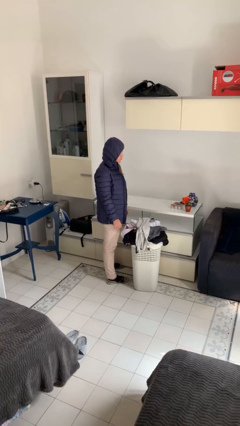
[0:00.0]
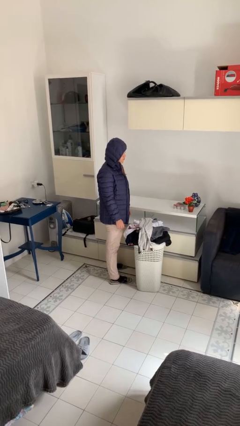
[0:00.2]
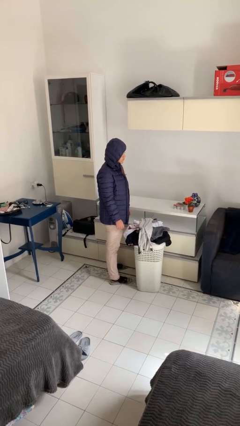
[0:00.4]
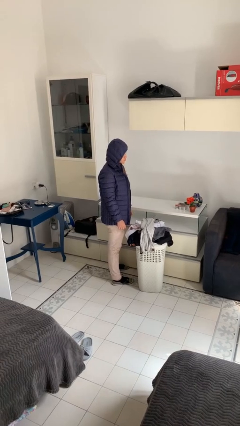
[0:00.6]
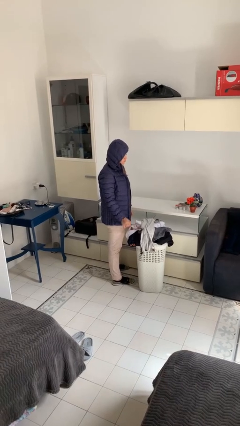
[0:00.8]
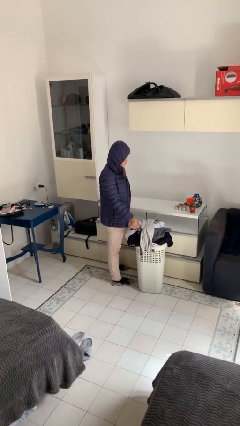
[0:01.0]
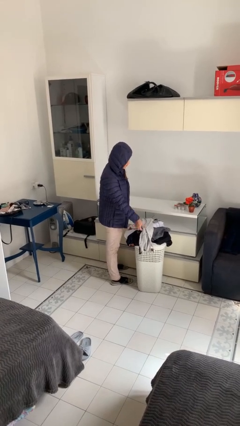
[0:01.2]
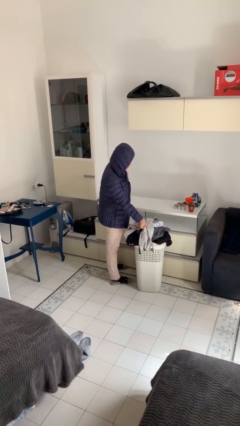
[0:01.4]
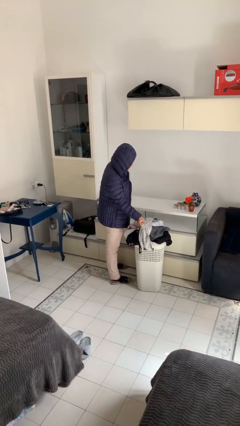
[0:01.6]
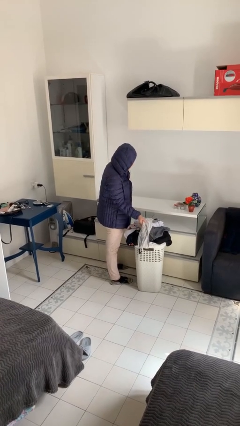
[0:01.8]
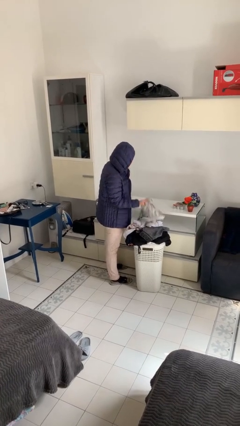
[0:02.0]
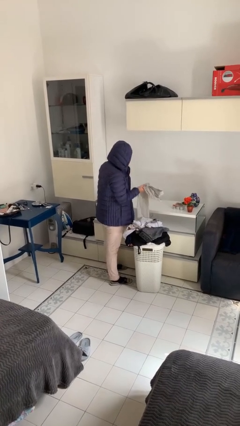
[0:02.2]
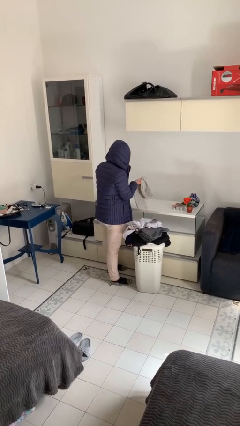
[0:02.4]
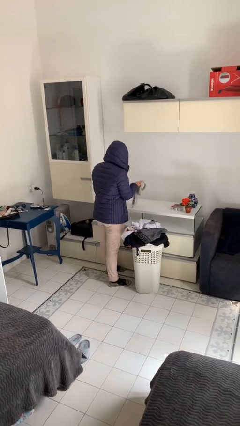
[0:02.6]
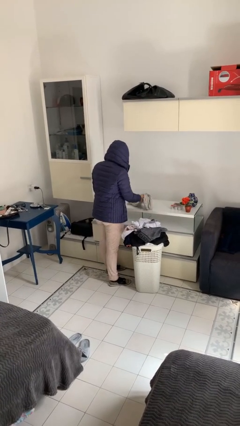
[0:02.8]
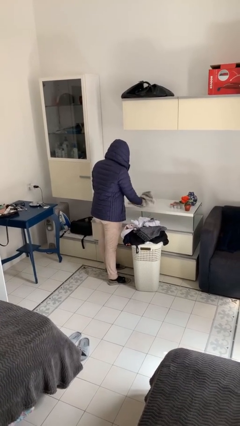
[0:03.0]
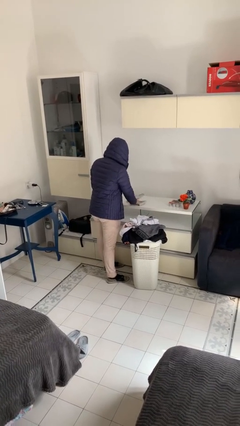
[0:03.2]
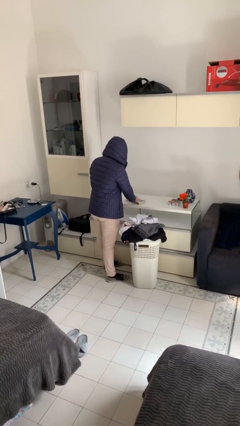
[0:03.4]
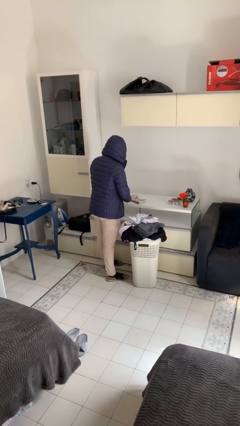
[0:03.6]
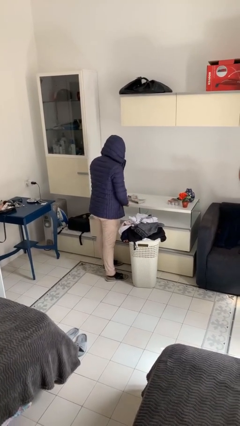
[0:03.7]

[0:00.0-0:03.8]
person folds shirt

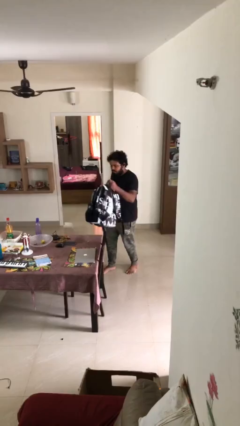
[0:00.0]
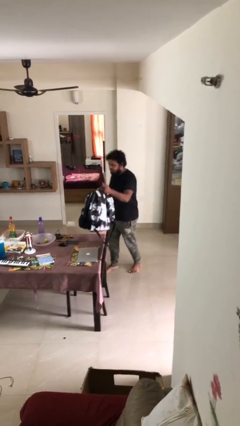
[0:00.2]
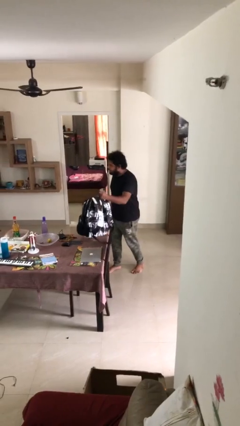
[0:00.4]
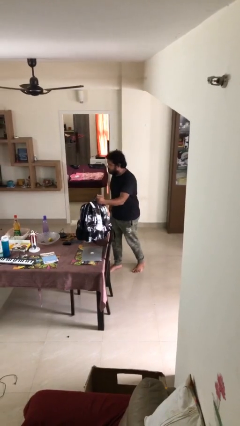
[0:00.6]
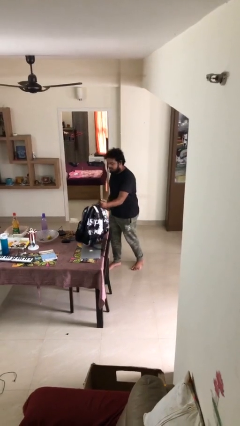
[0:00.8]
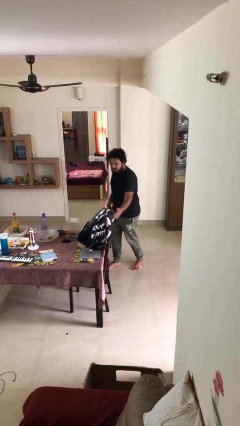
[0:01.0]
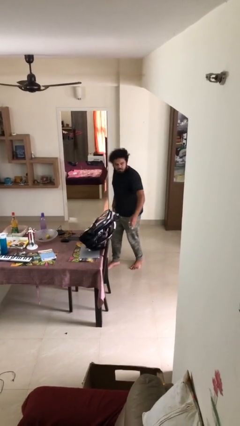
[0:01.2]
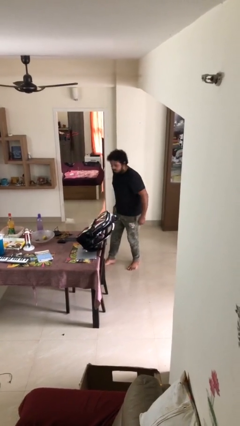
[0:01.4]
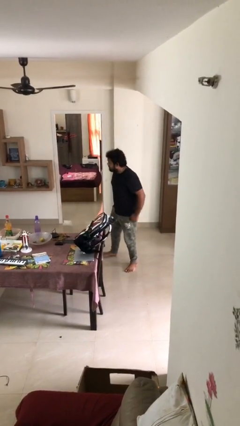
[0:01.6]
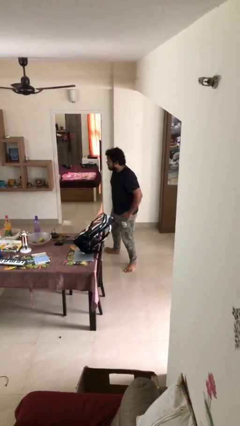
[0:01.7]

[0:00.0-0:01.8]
person puts down object on table

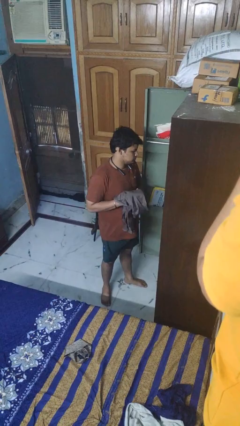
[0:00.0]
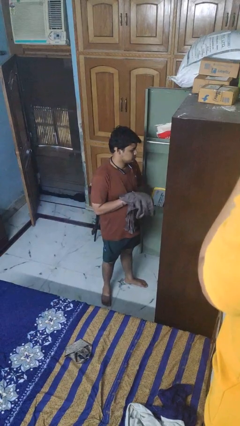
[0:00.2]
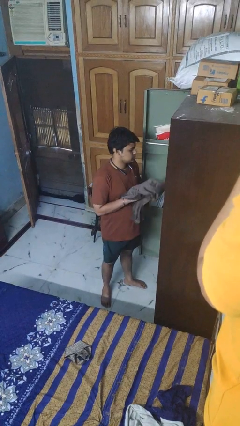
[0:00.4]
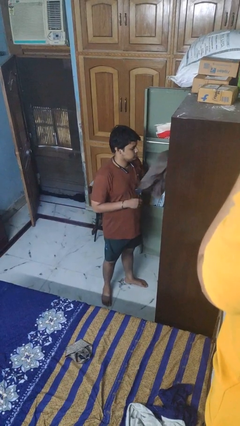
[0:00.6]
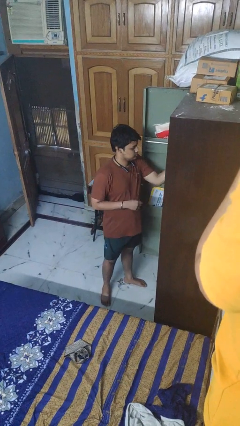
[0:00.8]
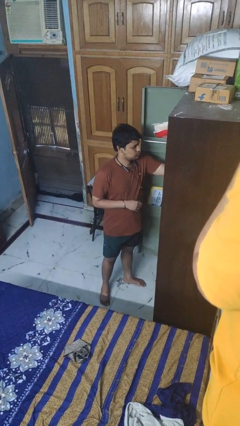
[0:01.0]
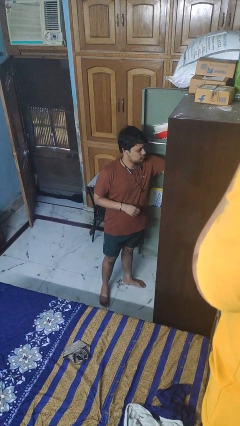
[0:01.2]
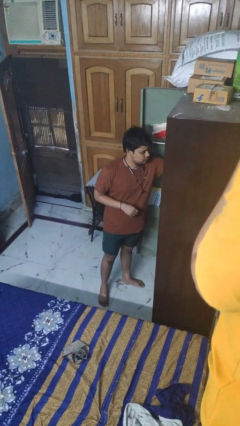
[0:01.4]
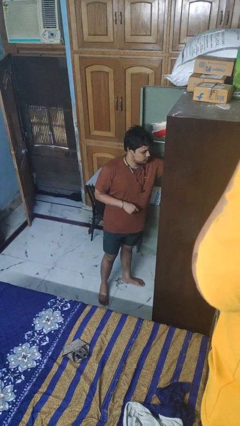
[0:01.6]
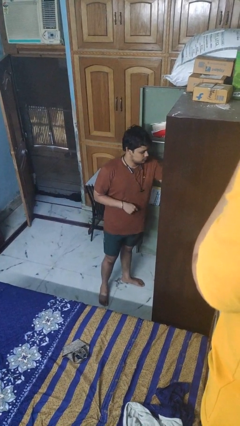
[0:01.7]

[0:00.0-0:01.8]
person puts clothes into dresser

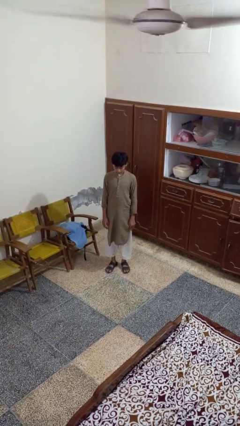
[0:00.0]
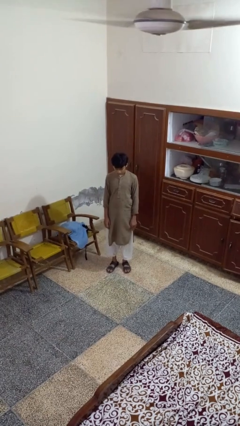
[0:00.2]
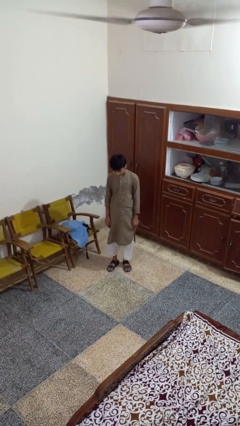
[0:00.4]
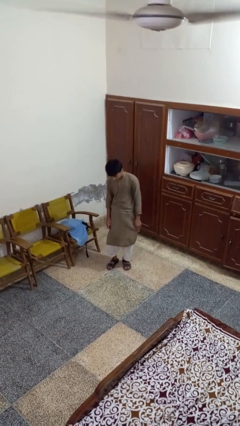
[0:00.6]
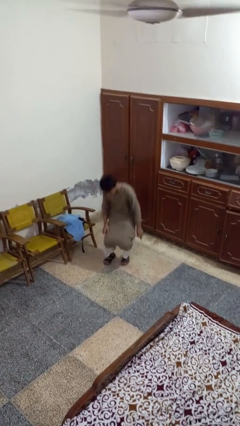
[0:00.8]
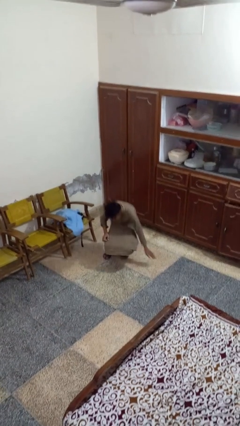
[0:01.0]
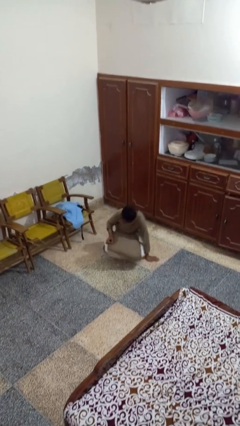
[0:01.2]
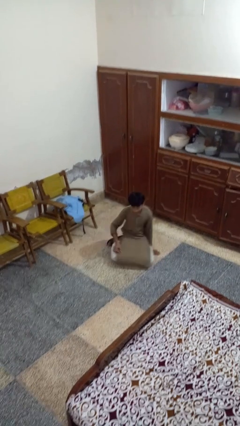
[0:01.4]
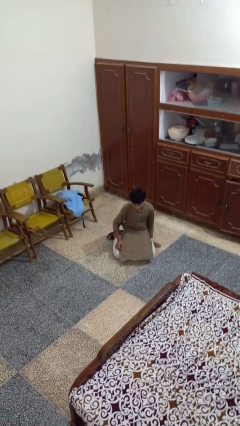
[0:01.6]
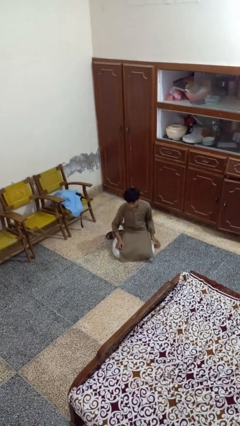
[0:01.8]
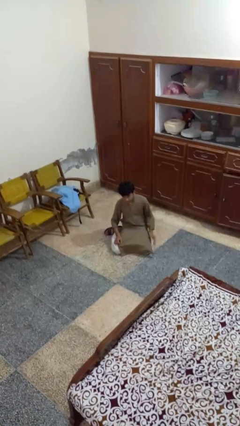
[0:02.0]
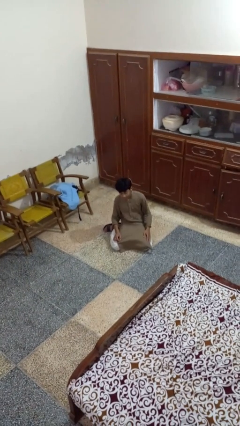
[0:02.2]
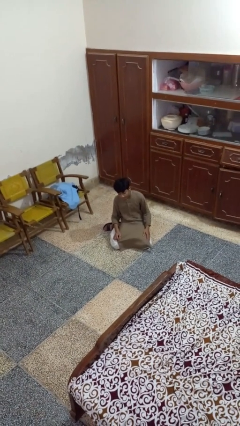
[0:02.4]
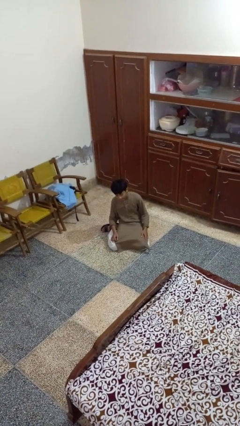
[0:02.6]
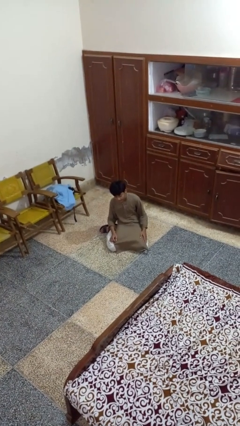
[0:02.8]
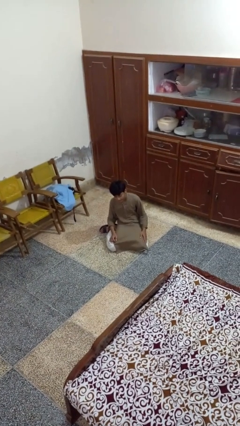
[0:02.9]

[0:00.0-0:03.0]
person falls while standing

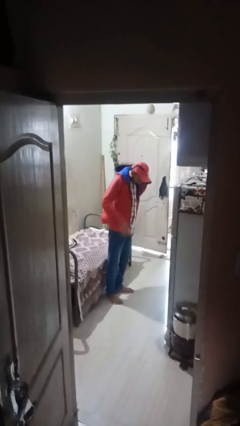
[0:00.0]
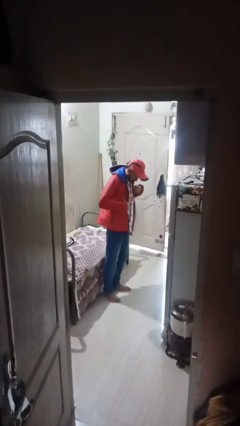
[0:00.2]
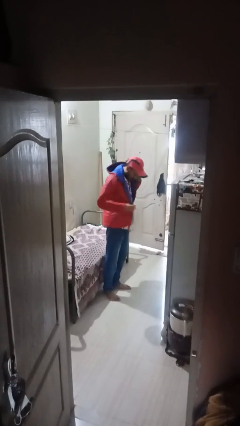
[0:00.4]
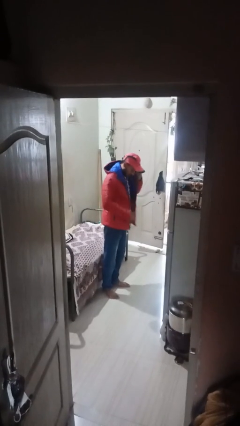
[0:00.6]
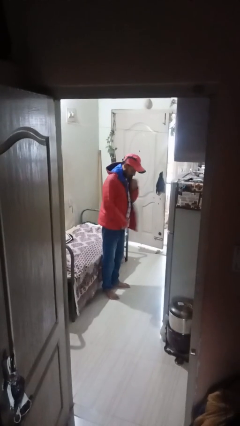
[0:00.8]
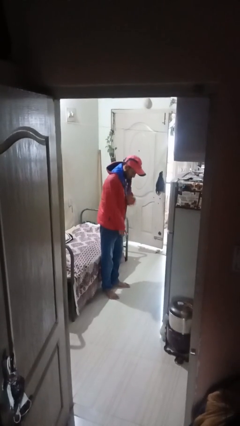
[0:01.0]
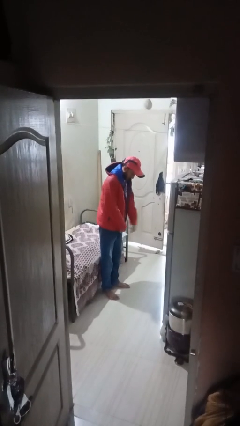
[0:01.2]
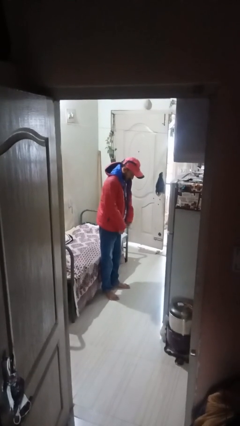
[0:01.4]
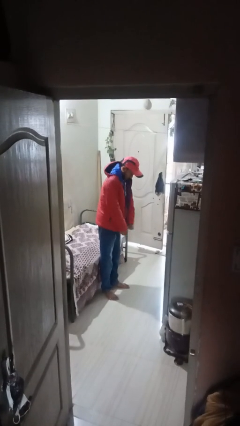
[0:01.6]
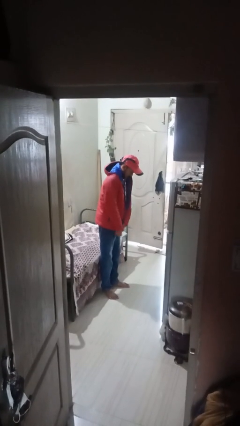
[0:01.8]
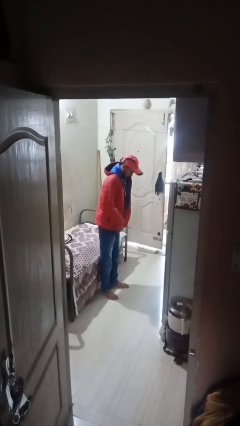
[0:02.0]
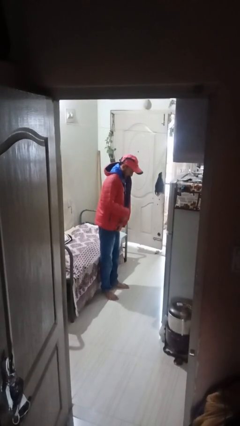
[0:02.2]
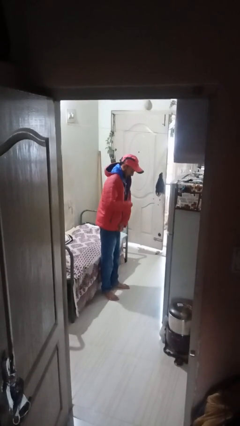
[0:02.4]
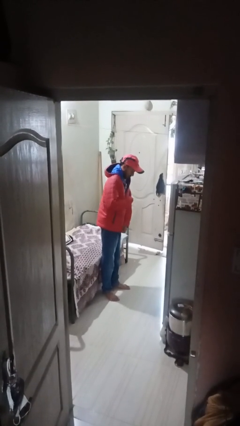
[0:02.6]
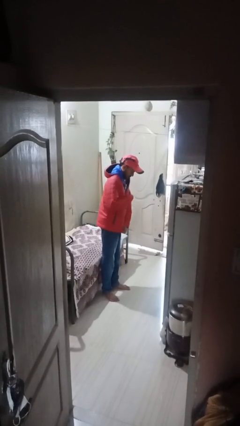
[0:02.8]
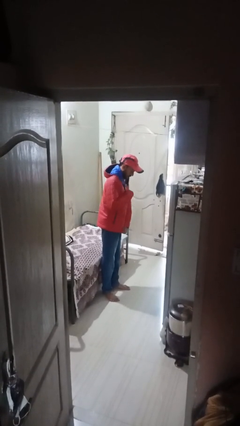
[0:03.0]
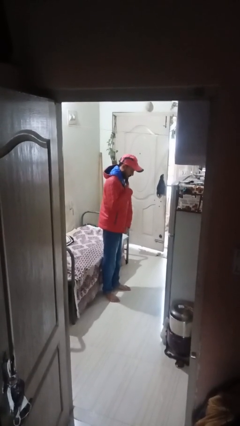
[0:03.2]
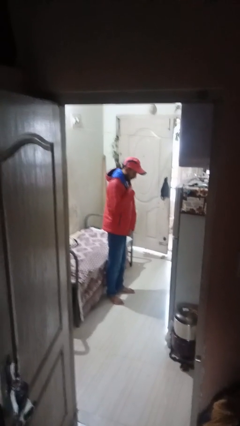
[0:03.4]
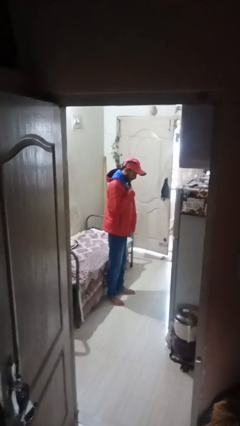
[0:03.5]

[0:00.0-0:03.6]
person zips up jacket

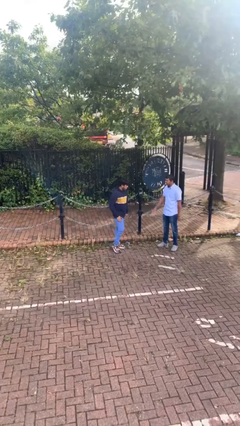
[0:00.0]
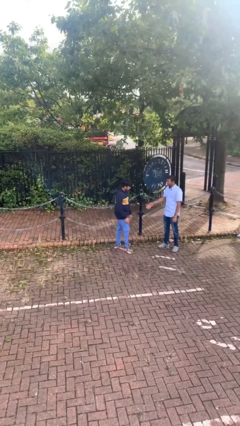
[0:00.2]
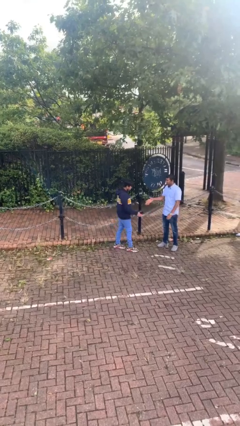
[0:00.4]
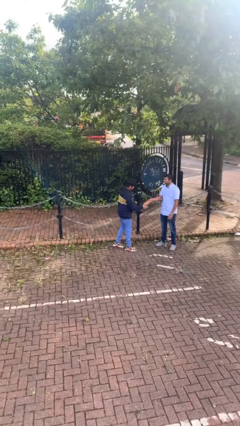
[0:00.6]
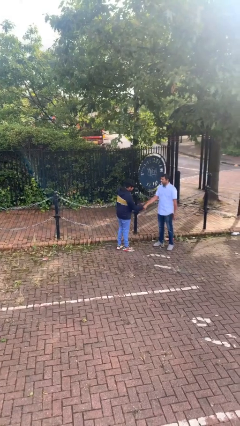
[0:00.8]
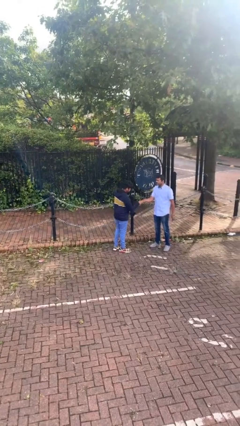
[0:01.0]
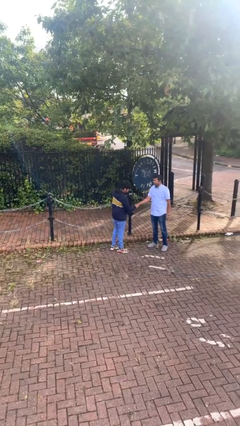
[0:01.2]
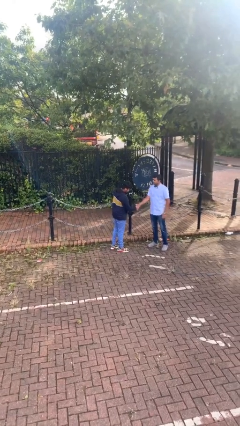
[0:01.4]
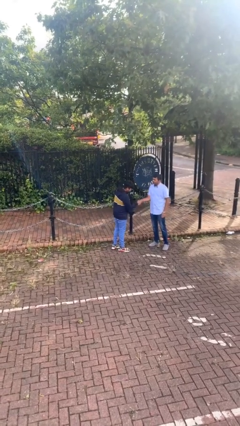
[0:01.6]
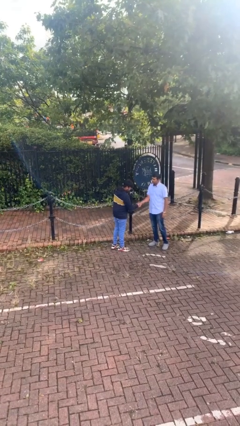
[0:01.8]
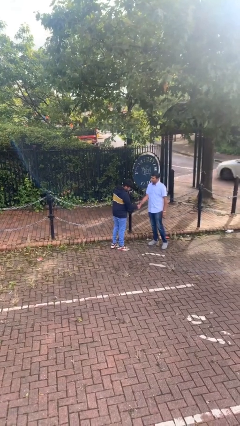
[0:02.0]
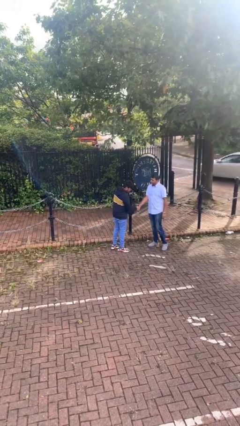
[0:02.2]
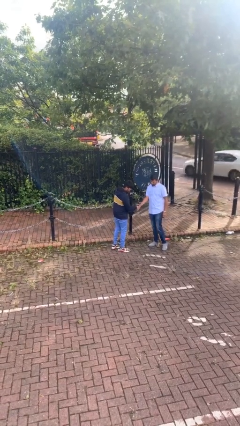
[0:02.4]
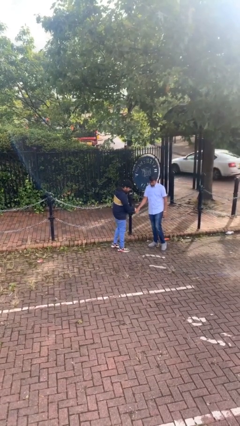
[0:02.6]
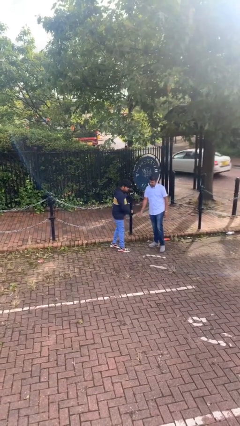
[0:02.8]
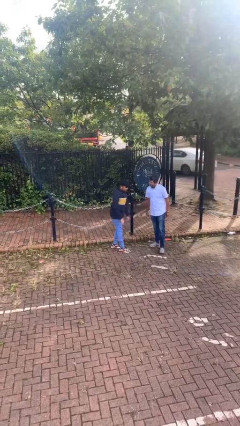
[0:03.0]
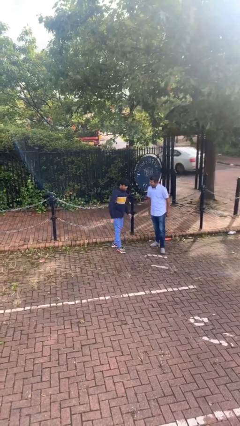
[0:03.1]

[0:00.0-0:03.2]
person shakes hand
